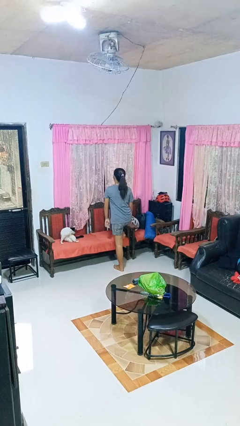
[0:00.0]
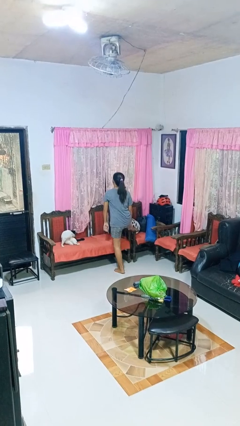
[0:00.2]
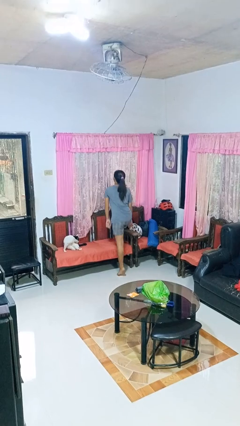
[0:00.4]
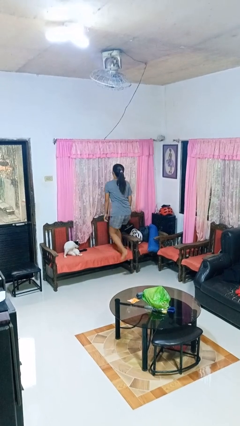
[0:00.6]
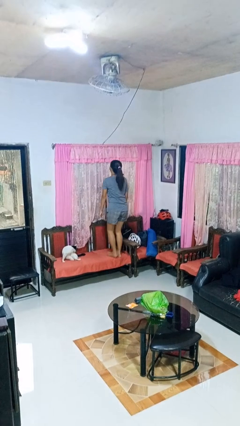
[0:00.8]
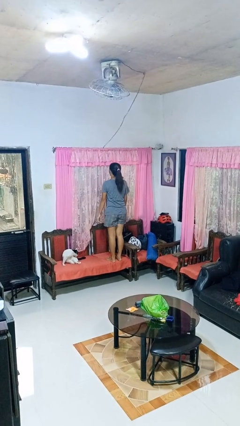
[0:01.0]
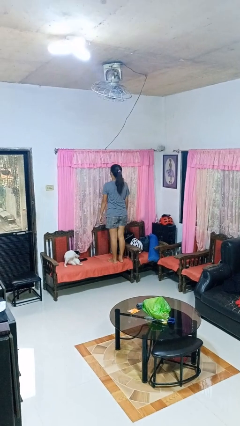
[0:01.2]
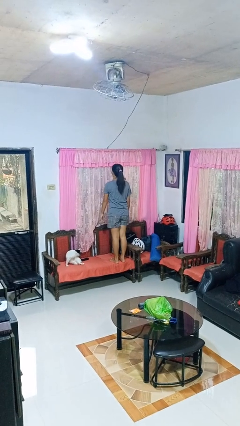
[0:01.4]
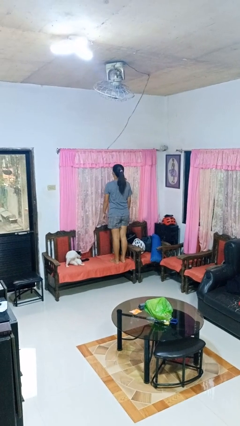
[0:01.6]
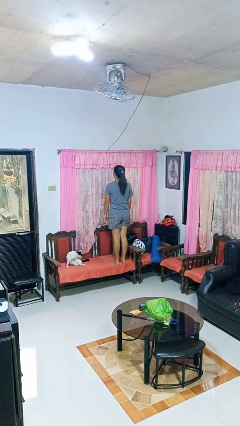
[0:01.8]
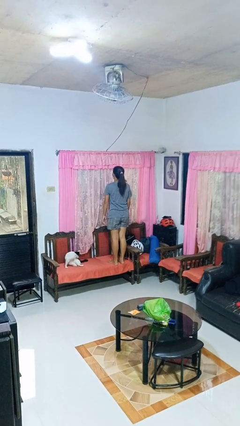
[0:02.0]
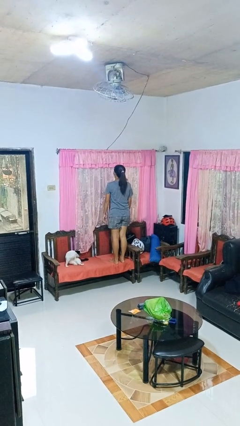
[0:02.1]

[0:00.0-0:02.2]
person climbs on chair

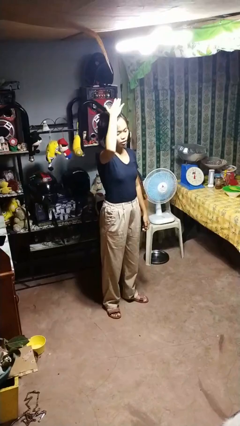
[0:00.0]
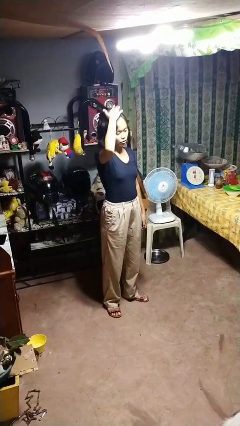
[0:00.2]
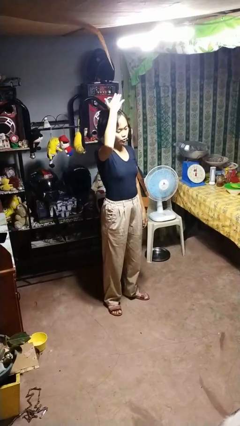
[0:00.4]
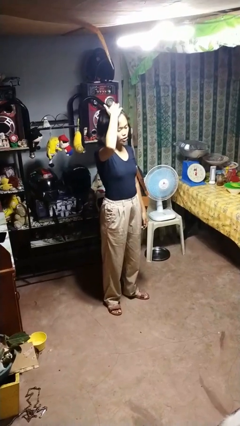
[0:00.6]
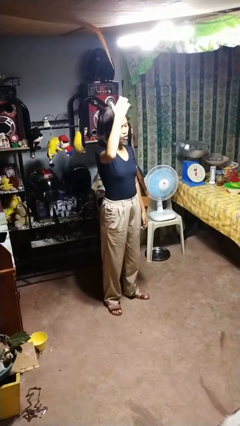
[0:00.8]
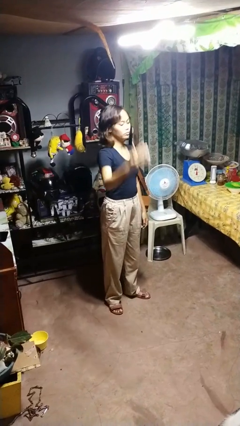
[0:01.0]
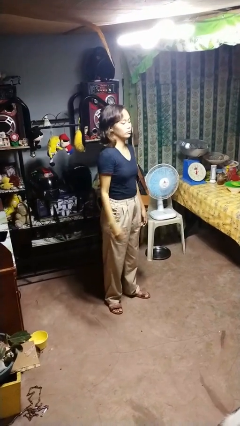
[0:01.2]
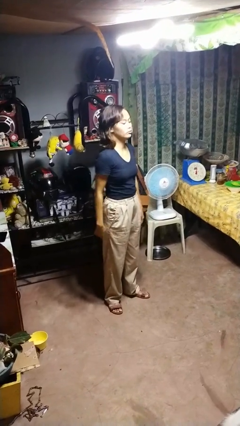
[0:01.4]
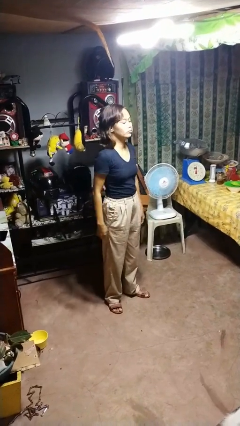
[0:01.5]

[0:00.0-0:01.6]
person pats head

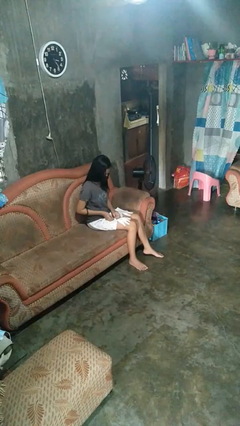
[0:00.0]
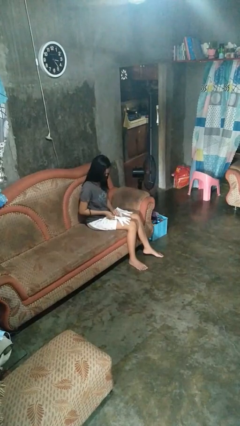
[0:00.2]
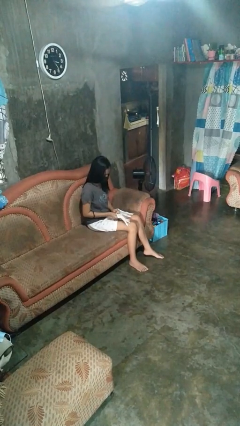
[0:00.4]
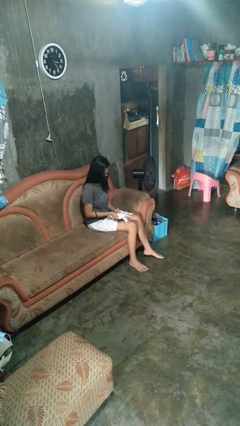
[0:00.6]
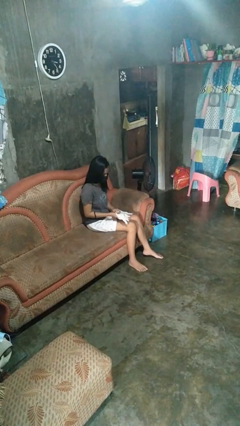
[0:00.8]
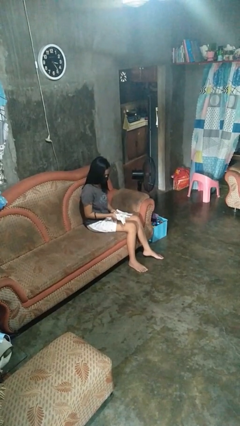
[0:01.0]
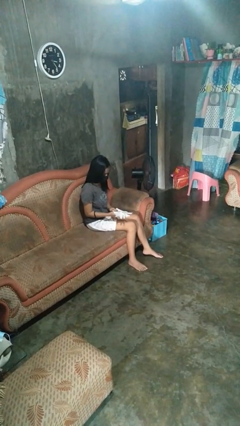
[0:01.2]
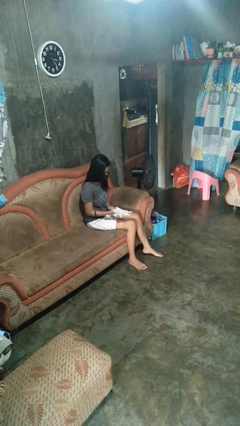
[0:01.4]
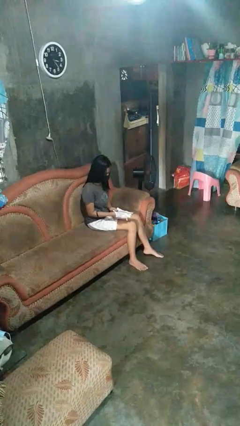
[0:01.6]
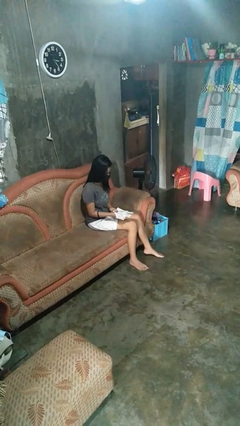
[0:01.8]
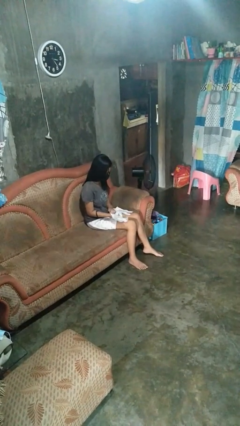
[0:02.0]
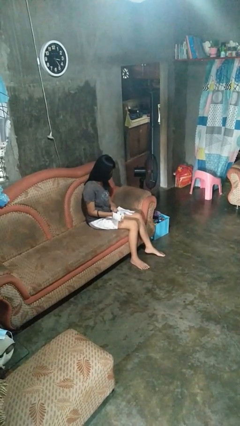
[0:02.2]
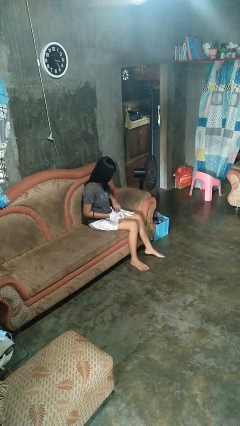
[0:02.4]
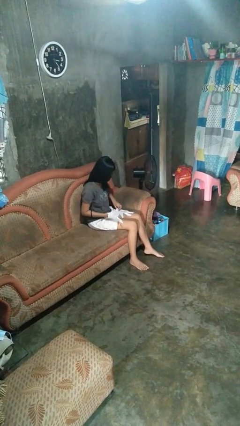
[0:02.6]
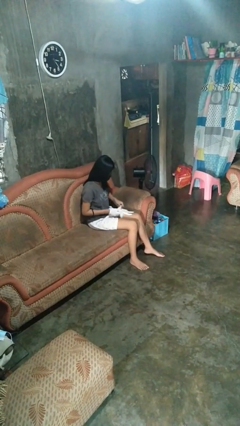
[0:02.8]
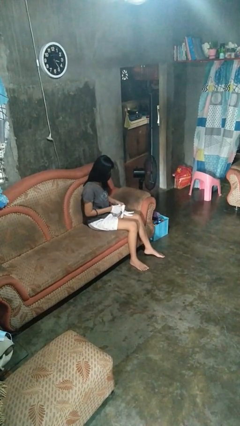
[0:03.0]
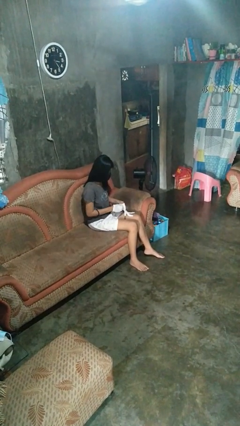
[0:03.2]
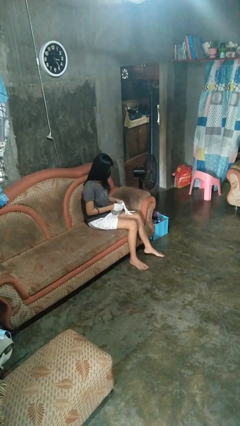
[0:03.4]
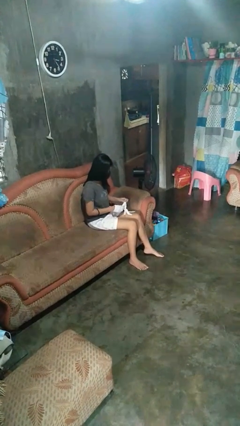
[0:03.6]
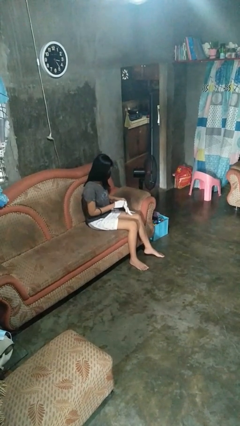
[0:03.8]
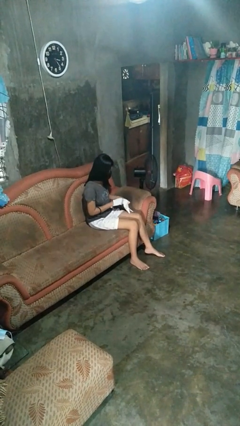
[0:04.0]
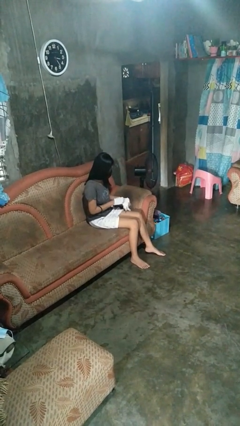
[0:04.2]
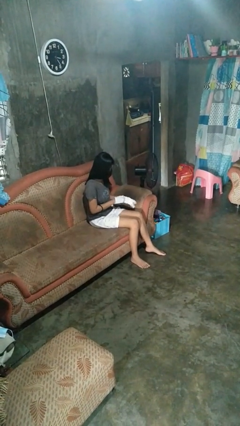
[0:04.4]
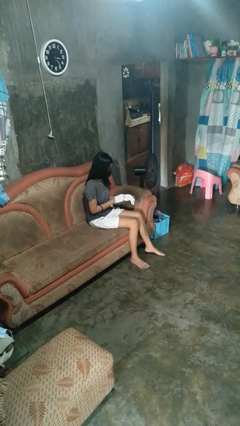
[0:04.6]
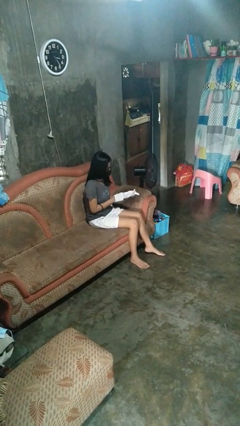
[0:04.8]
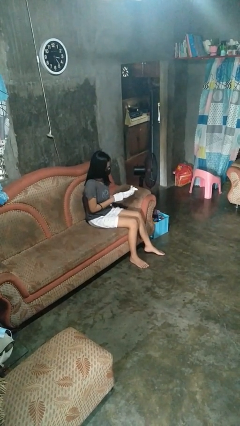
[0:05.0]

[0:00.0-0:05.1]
person puts on gloves

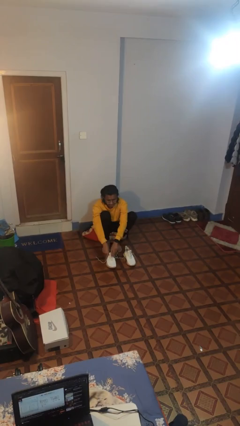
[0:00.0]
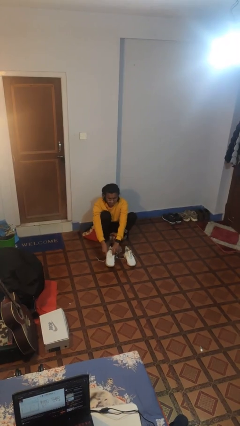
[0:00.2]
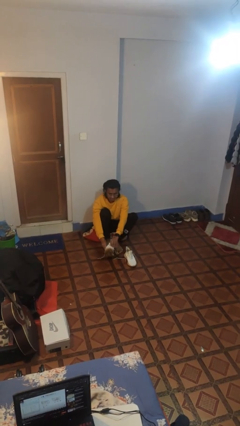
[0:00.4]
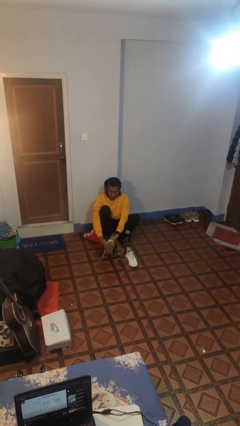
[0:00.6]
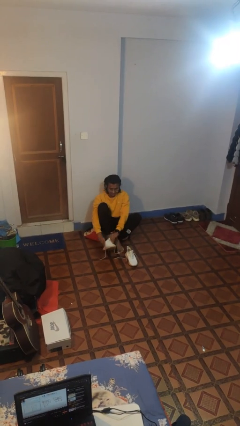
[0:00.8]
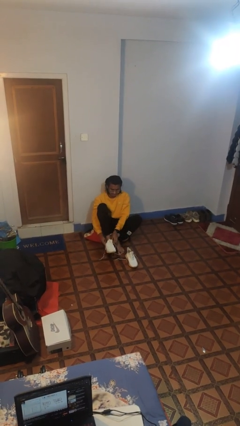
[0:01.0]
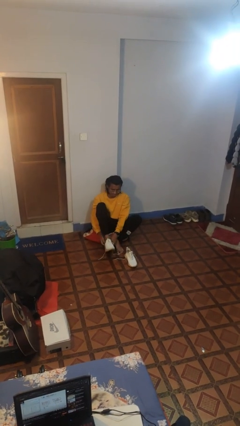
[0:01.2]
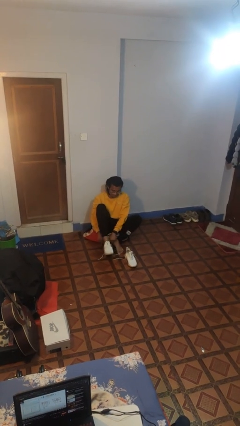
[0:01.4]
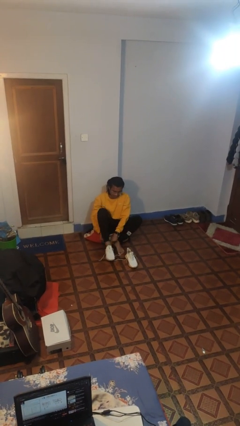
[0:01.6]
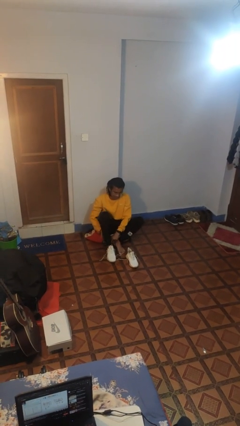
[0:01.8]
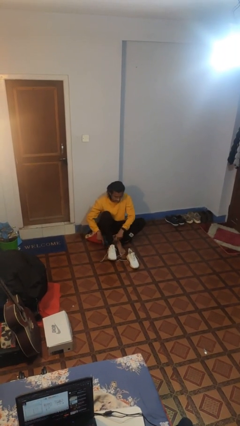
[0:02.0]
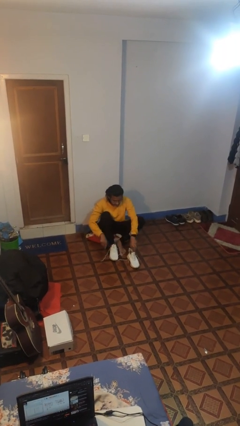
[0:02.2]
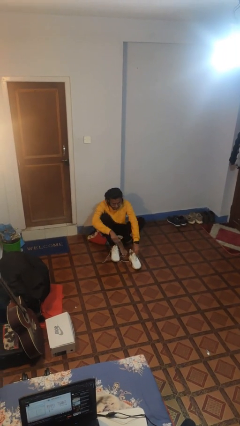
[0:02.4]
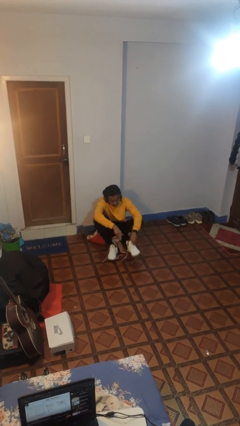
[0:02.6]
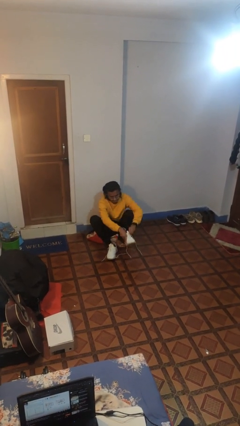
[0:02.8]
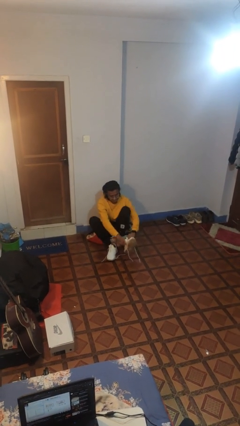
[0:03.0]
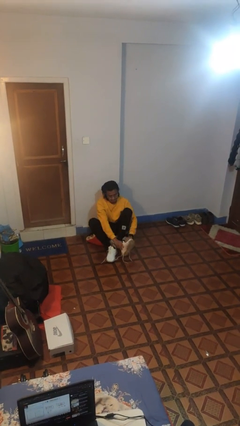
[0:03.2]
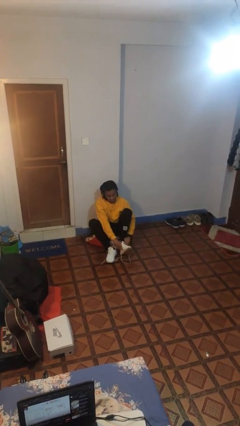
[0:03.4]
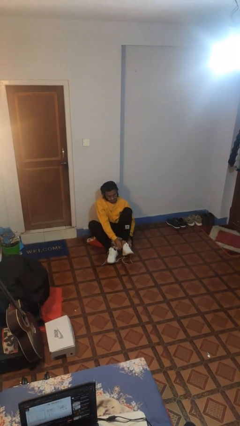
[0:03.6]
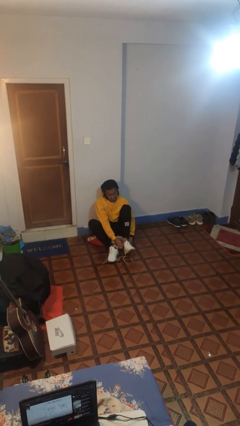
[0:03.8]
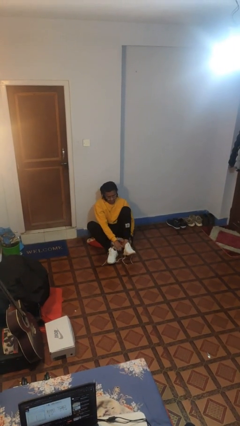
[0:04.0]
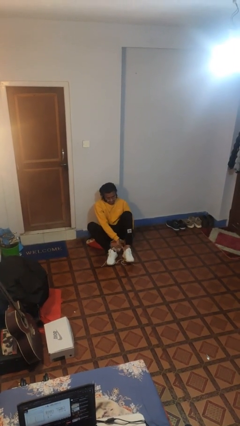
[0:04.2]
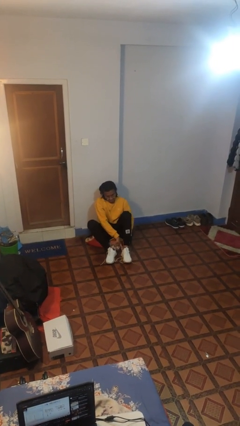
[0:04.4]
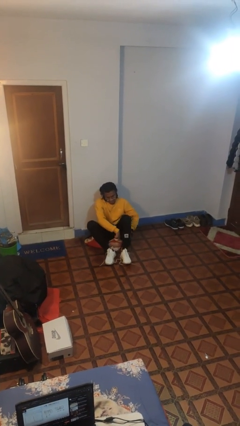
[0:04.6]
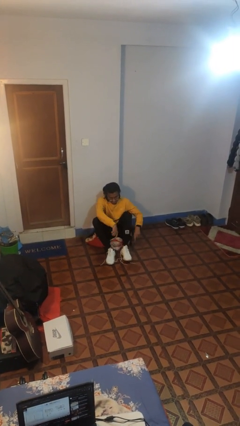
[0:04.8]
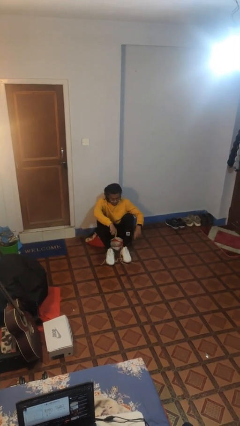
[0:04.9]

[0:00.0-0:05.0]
person puts on shoes

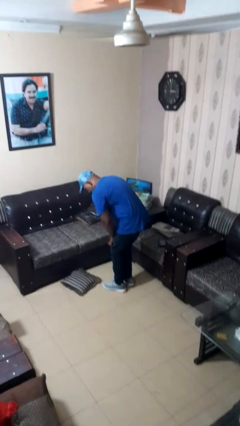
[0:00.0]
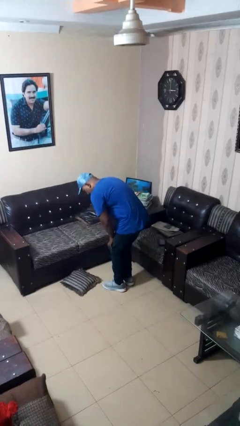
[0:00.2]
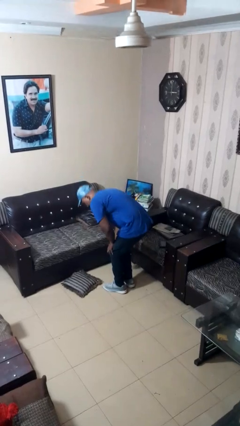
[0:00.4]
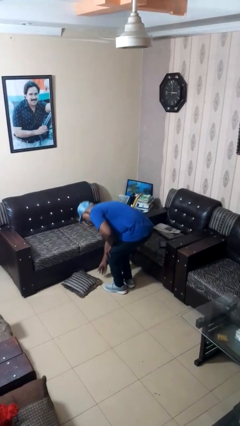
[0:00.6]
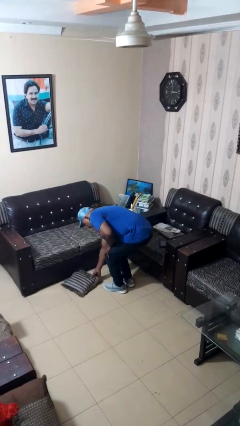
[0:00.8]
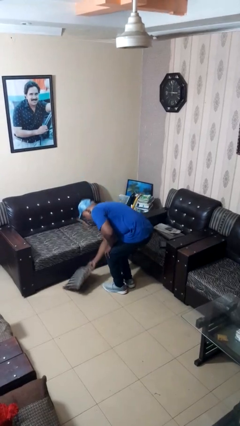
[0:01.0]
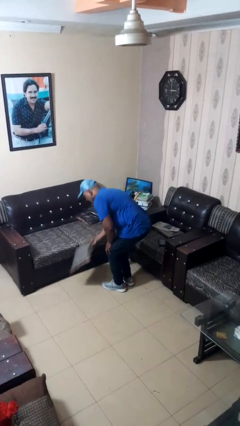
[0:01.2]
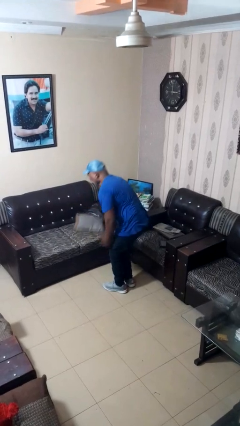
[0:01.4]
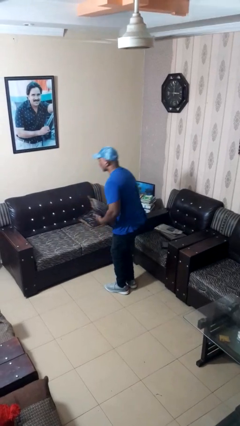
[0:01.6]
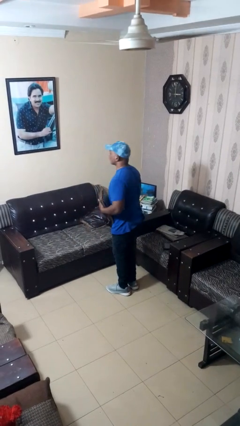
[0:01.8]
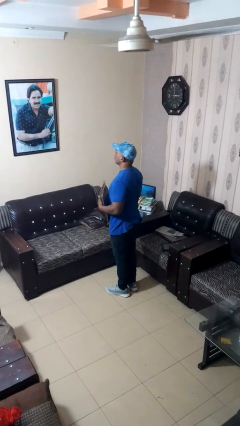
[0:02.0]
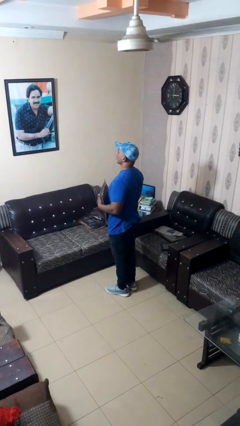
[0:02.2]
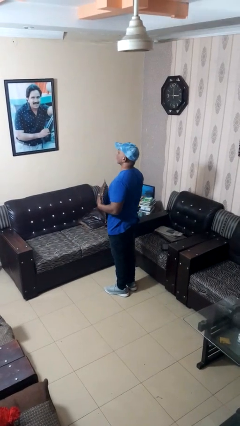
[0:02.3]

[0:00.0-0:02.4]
person picks up object from floor

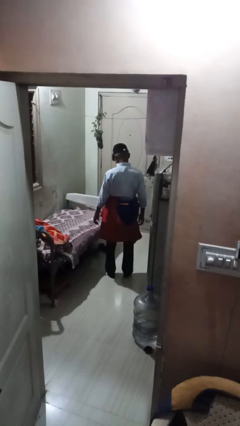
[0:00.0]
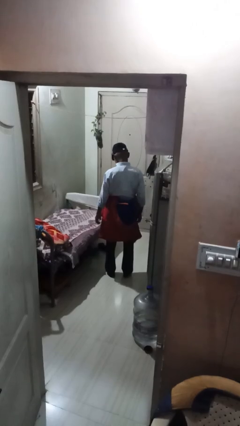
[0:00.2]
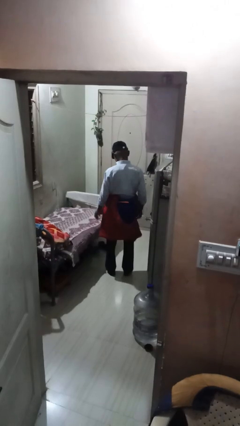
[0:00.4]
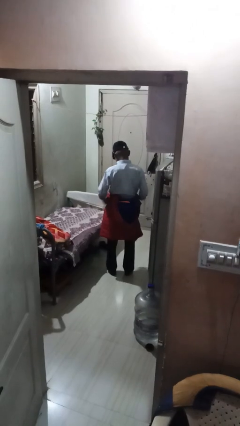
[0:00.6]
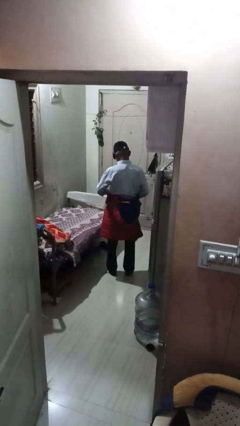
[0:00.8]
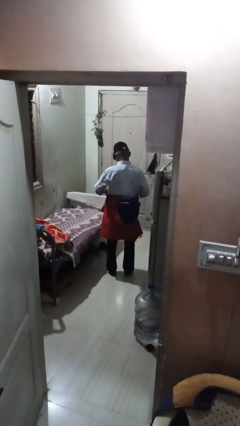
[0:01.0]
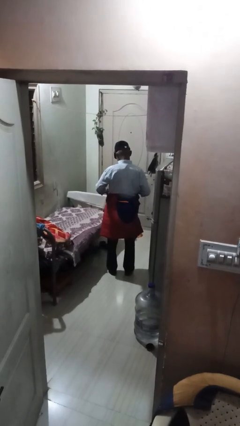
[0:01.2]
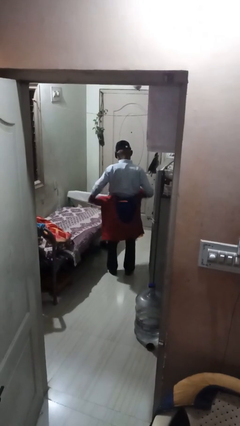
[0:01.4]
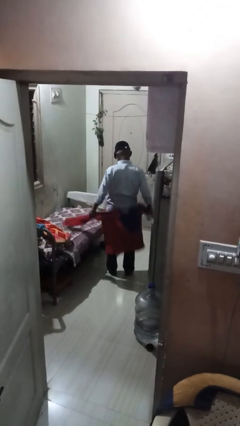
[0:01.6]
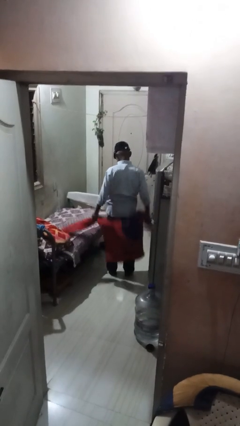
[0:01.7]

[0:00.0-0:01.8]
person unties jacket around waist
